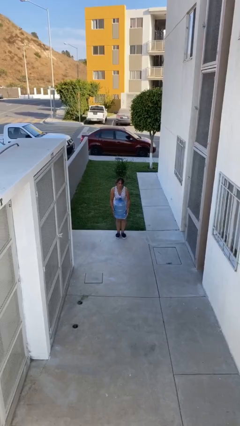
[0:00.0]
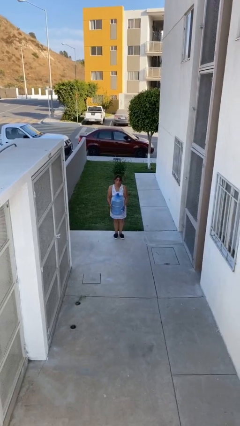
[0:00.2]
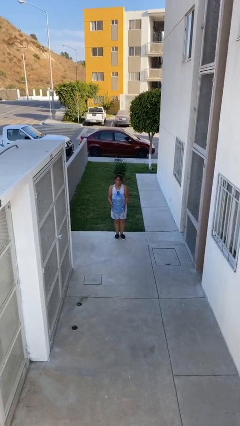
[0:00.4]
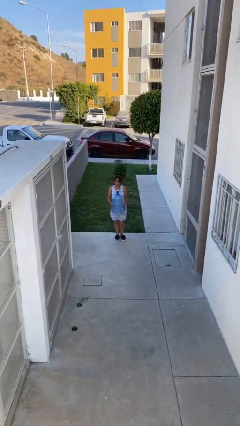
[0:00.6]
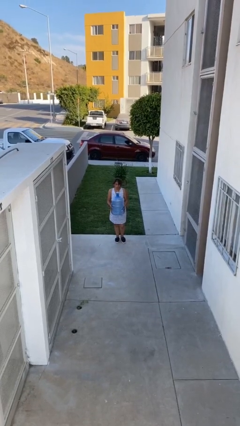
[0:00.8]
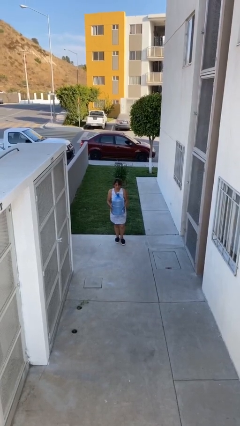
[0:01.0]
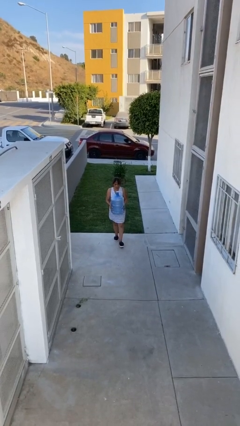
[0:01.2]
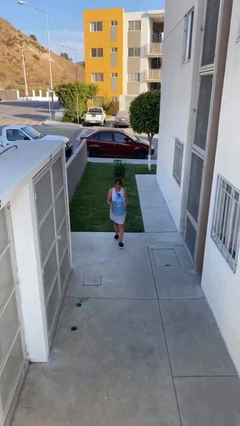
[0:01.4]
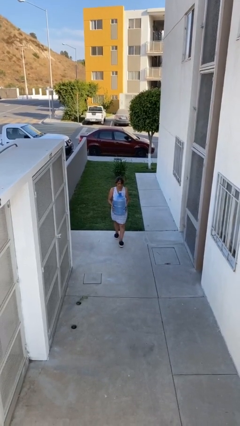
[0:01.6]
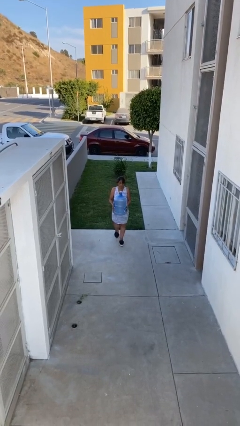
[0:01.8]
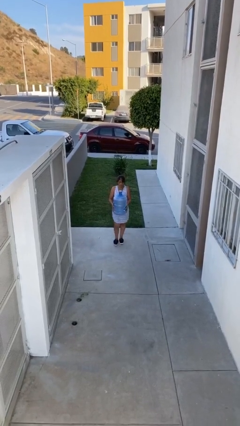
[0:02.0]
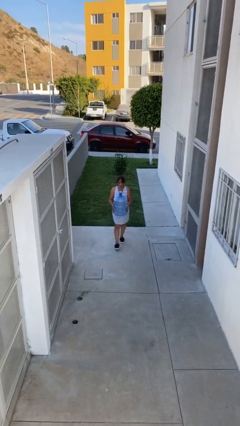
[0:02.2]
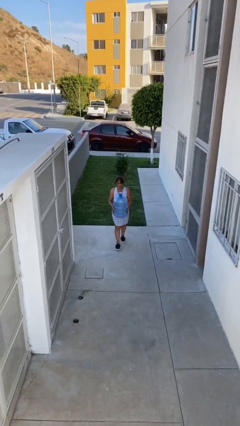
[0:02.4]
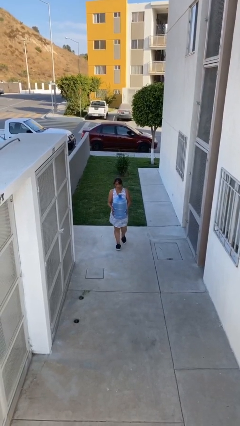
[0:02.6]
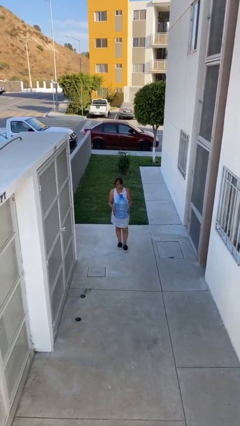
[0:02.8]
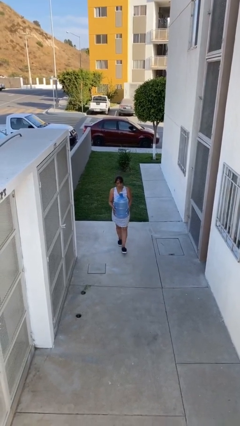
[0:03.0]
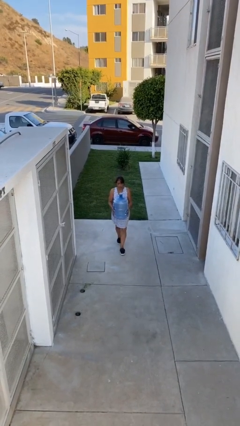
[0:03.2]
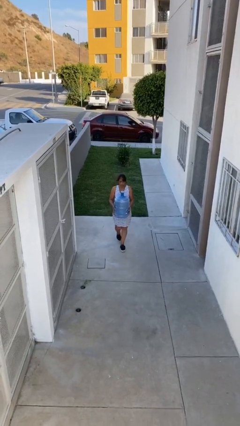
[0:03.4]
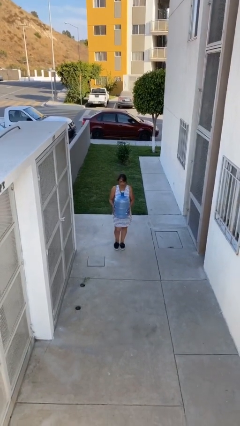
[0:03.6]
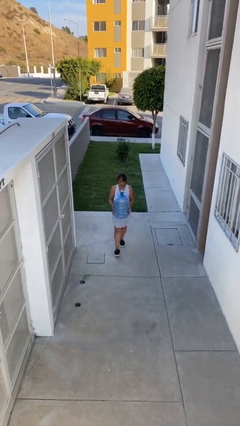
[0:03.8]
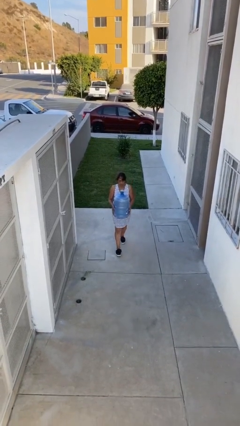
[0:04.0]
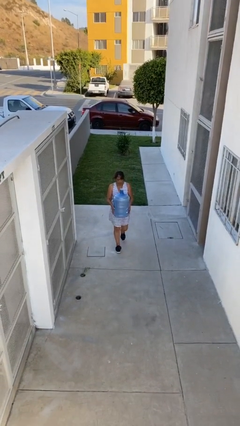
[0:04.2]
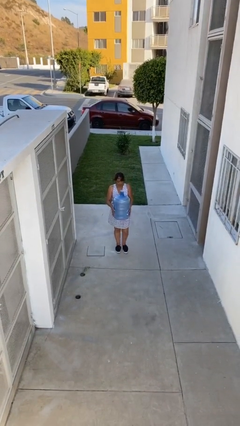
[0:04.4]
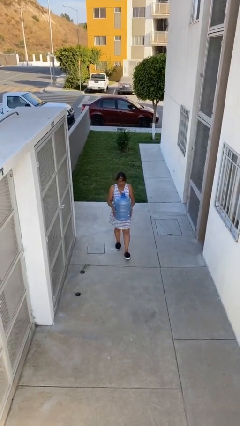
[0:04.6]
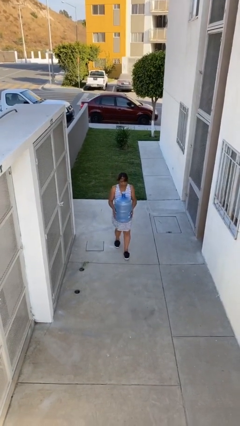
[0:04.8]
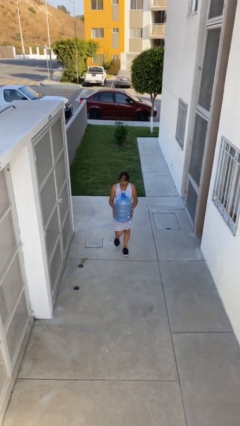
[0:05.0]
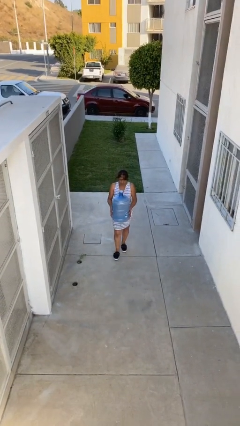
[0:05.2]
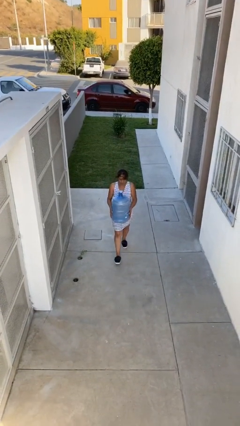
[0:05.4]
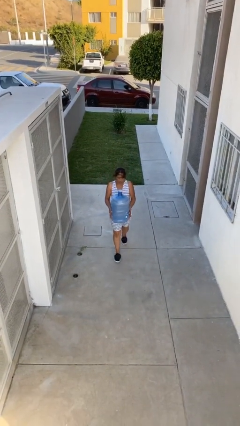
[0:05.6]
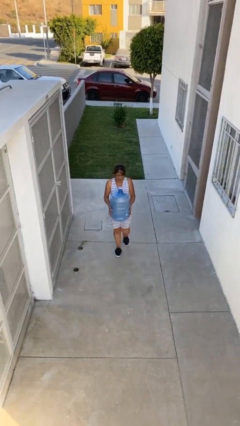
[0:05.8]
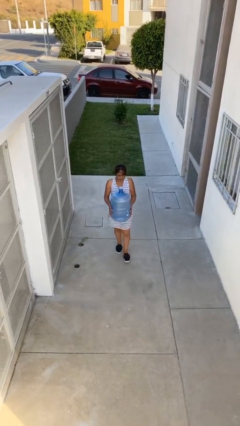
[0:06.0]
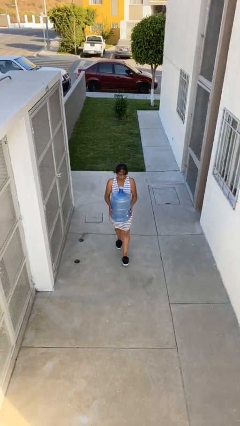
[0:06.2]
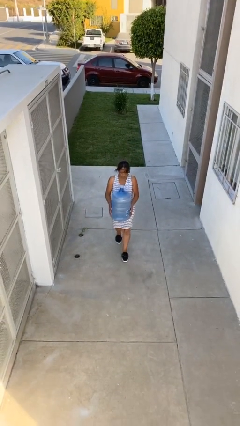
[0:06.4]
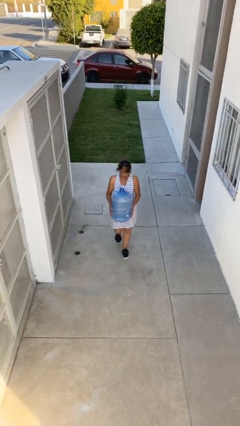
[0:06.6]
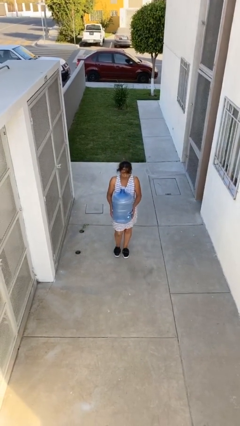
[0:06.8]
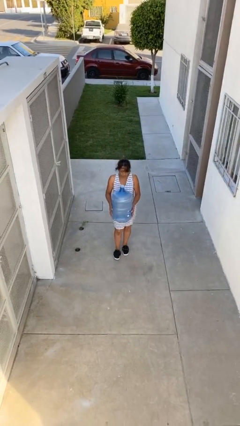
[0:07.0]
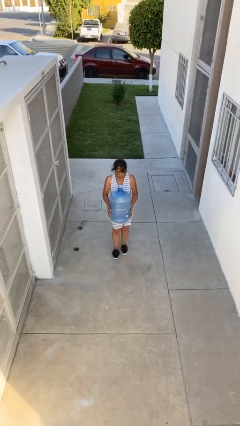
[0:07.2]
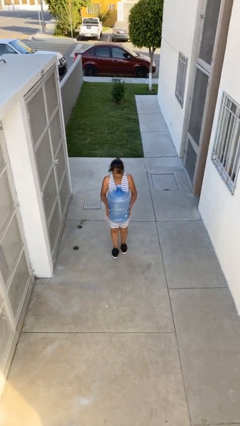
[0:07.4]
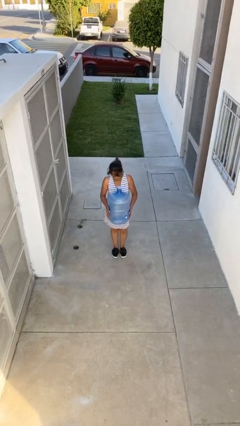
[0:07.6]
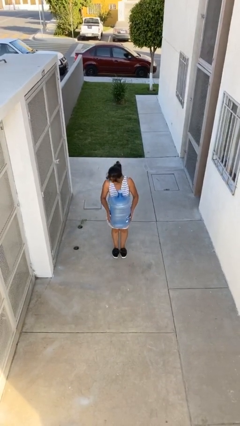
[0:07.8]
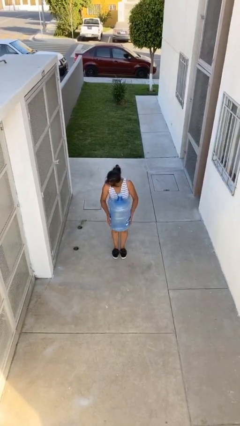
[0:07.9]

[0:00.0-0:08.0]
person carries heavy object

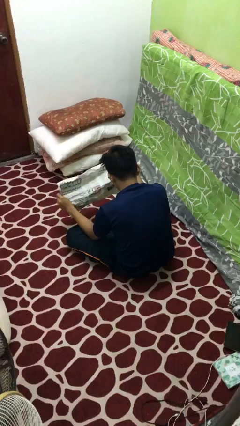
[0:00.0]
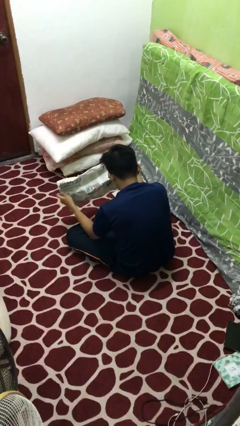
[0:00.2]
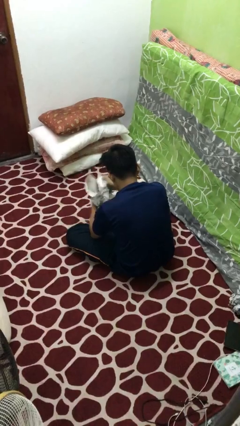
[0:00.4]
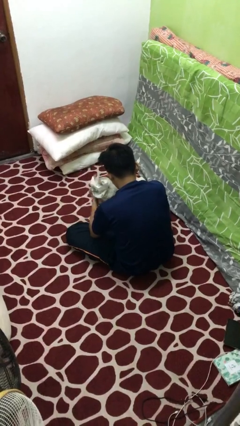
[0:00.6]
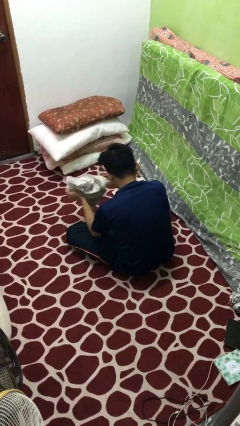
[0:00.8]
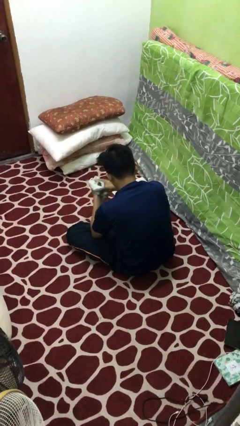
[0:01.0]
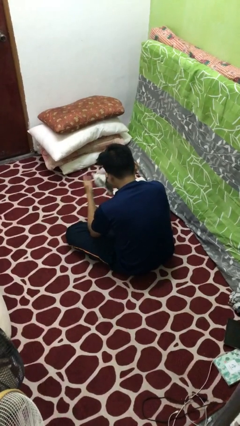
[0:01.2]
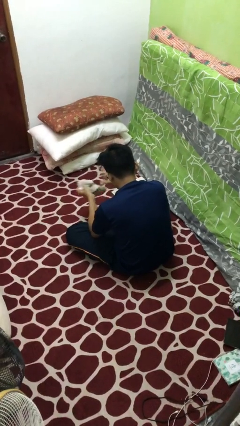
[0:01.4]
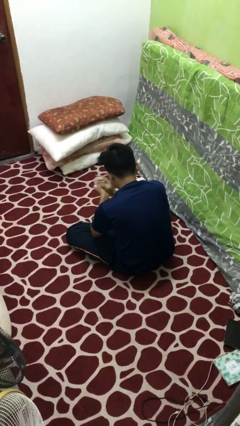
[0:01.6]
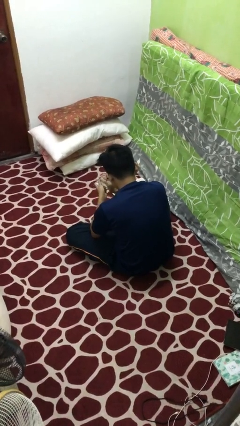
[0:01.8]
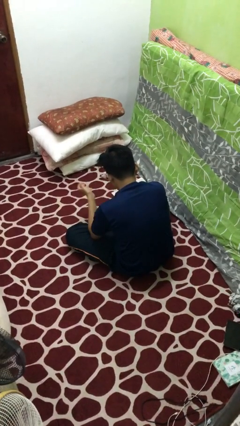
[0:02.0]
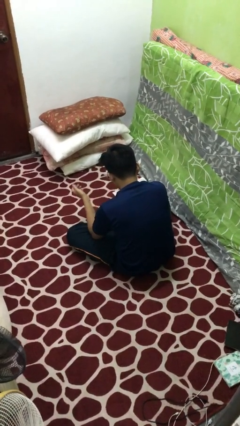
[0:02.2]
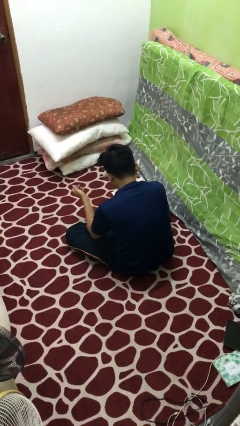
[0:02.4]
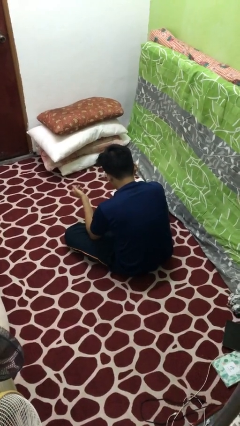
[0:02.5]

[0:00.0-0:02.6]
person crumples paper

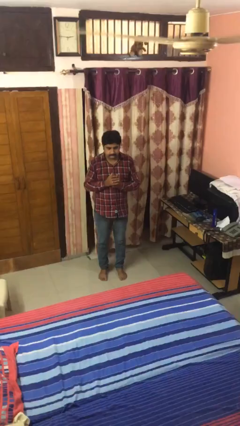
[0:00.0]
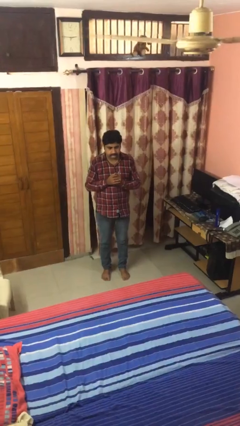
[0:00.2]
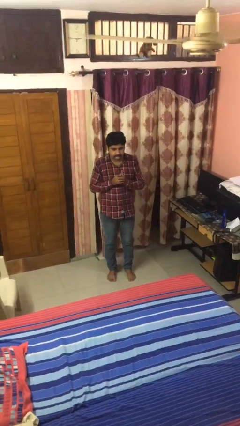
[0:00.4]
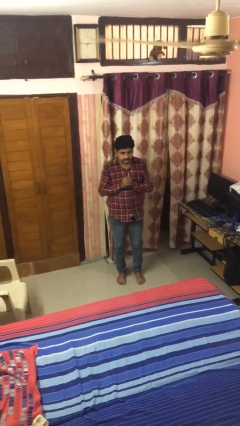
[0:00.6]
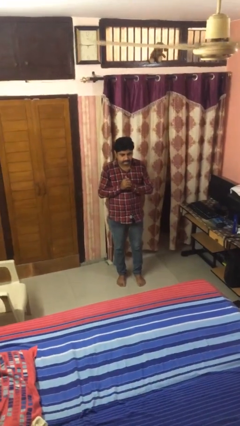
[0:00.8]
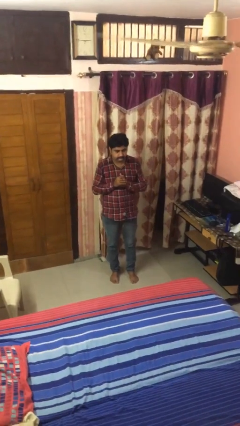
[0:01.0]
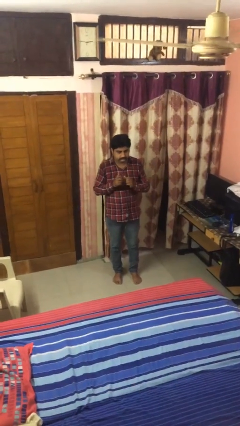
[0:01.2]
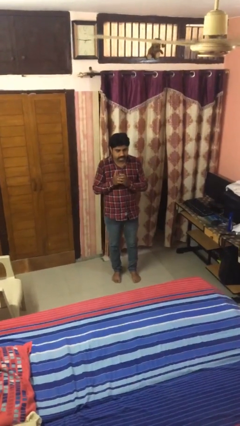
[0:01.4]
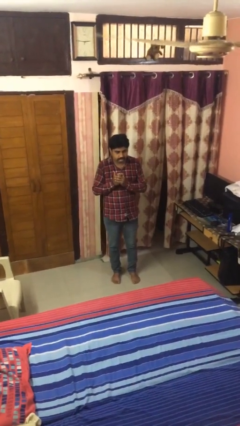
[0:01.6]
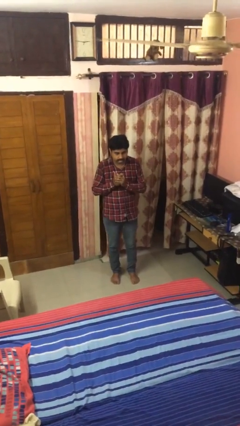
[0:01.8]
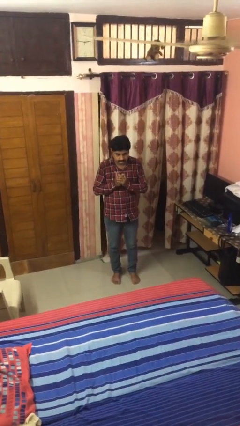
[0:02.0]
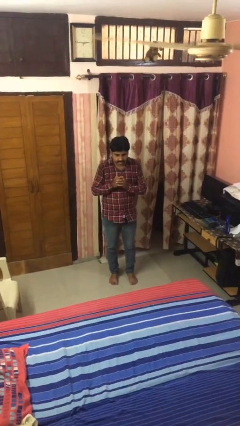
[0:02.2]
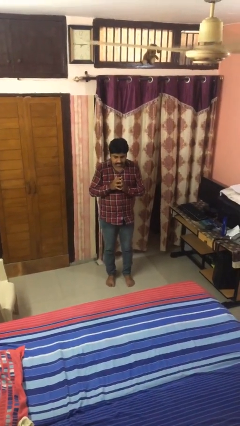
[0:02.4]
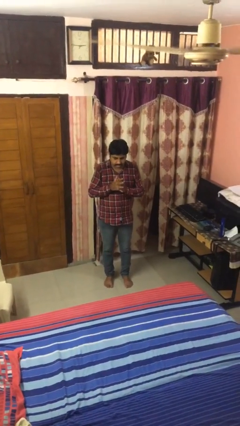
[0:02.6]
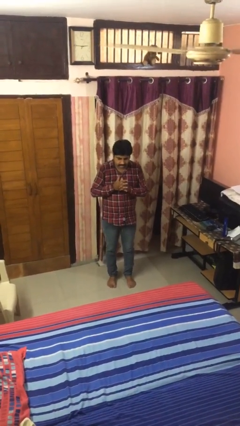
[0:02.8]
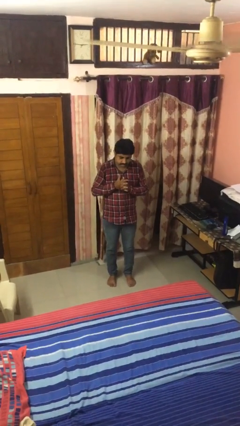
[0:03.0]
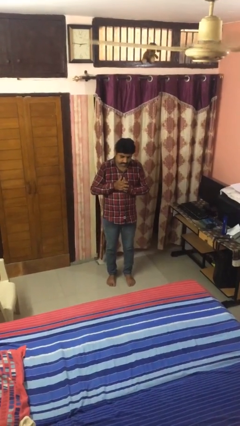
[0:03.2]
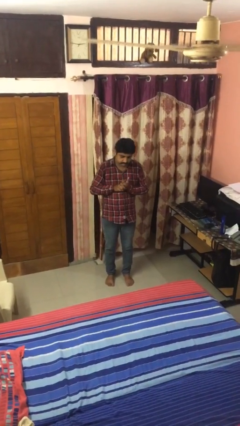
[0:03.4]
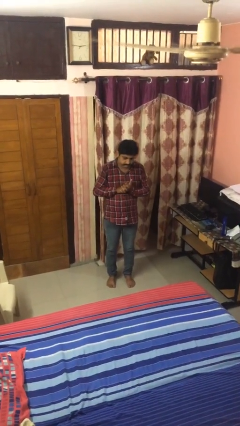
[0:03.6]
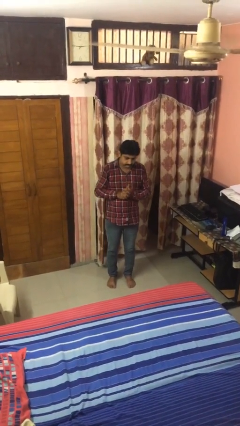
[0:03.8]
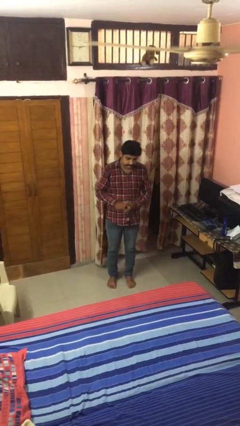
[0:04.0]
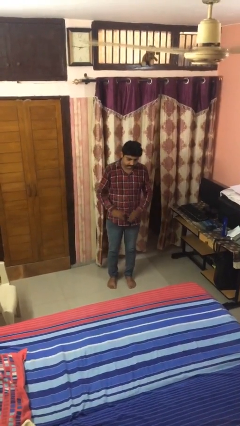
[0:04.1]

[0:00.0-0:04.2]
person cracks knuckles

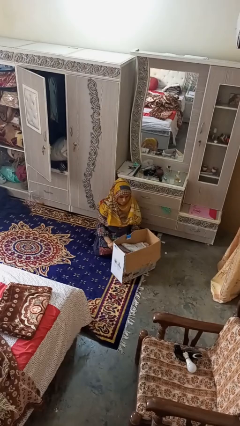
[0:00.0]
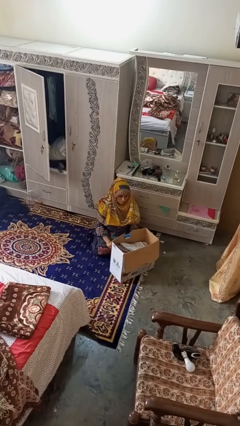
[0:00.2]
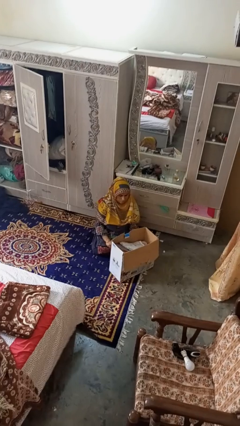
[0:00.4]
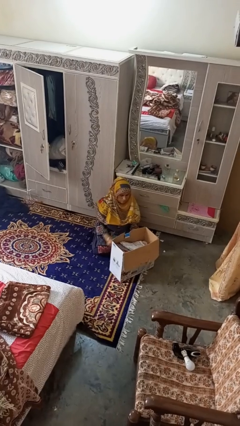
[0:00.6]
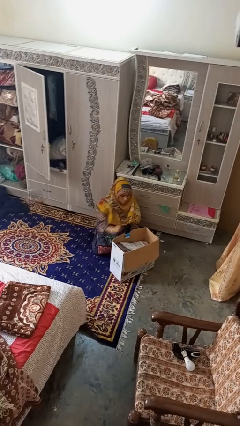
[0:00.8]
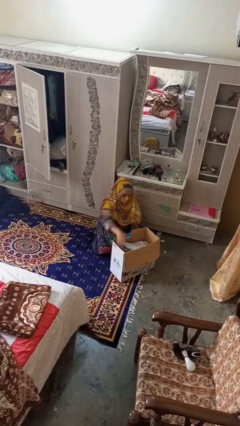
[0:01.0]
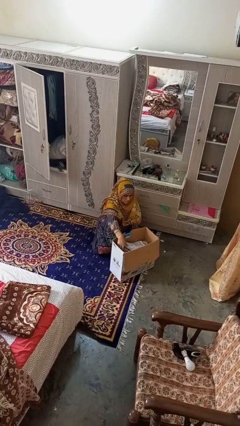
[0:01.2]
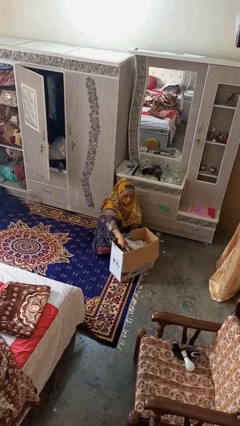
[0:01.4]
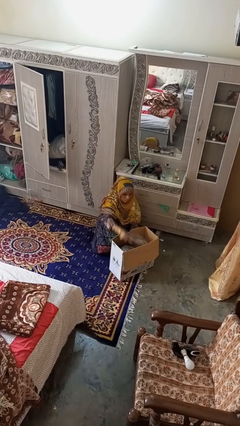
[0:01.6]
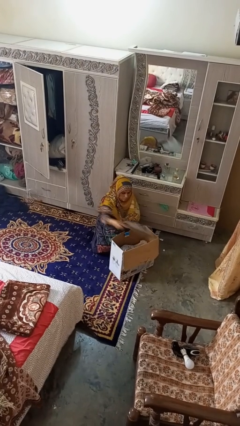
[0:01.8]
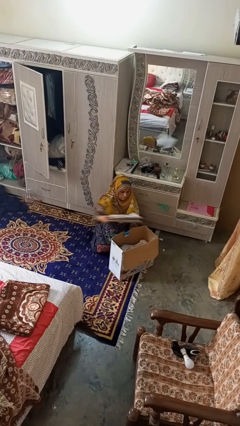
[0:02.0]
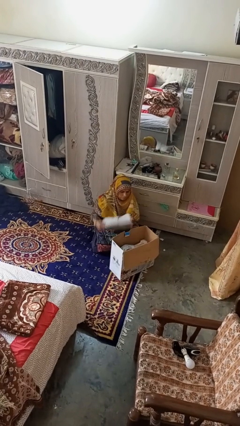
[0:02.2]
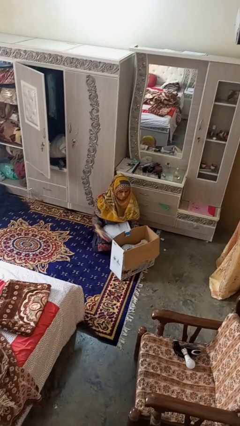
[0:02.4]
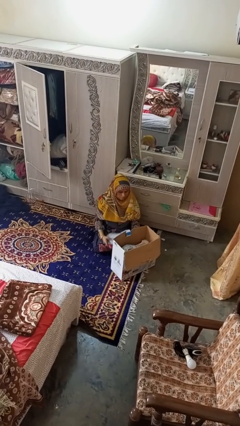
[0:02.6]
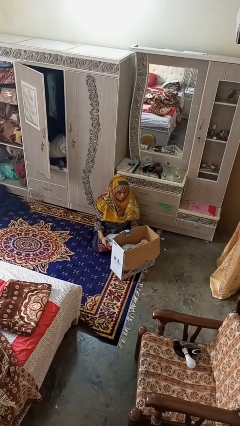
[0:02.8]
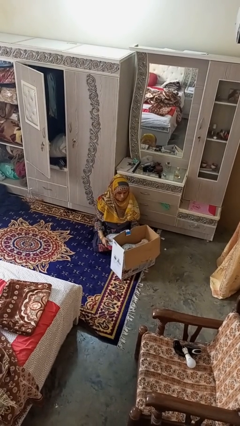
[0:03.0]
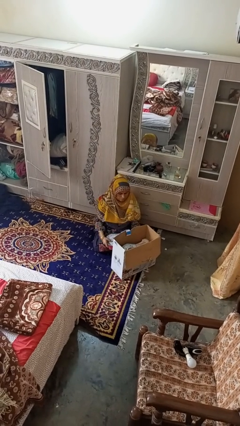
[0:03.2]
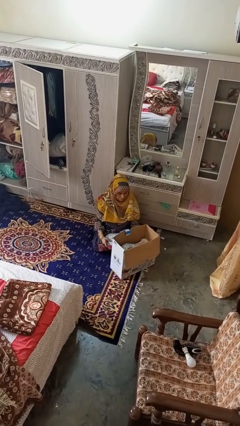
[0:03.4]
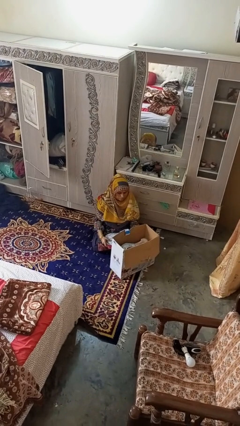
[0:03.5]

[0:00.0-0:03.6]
person takes object from box
